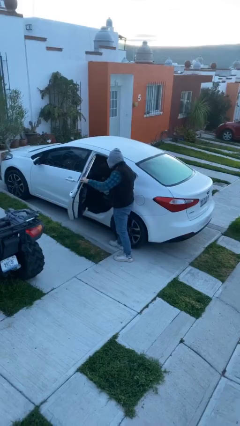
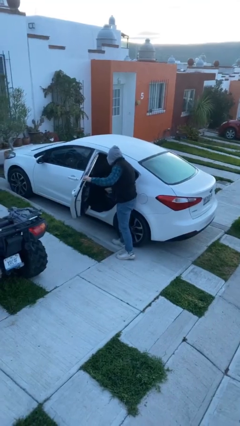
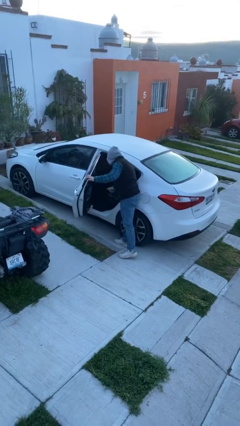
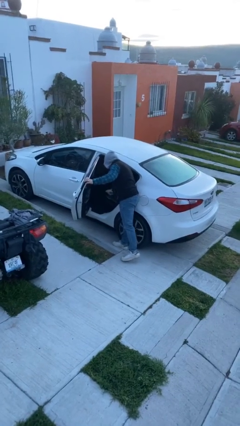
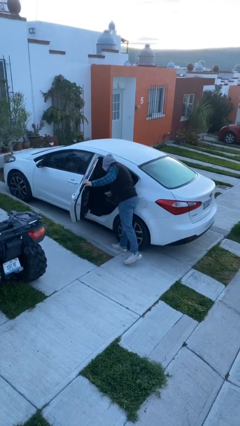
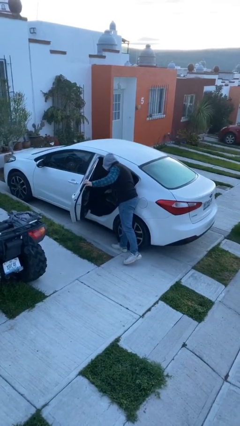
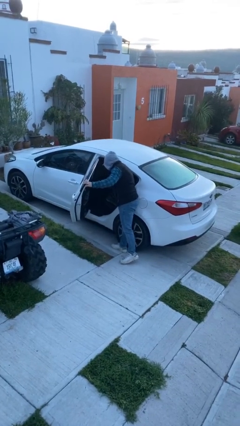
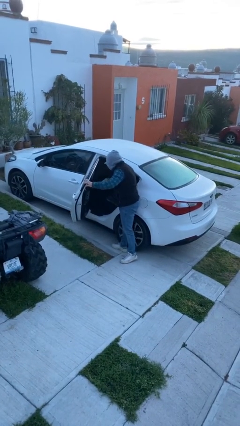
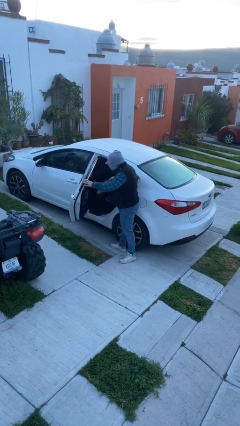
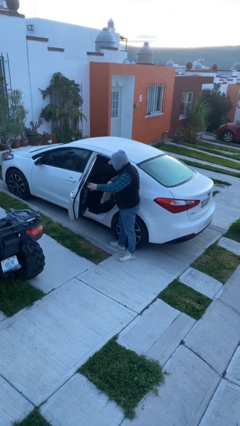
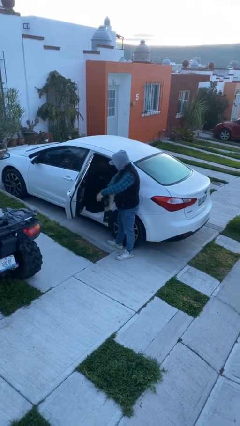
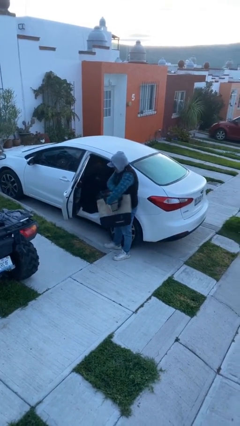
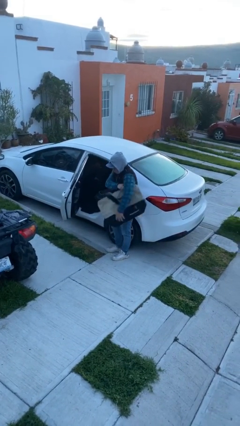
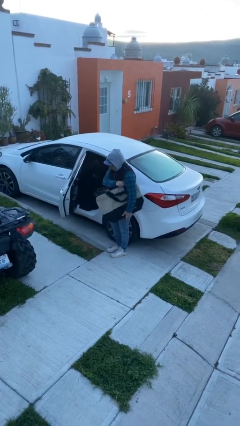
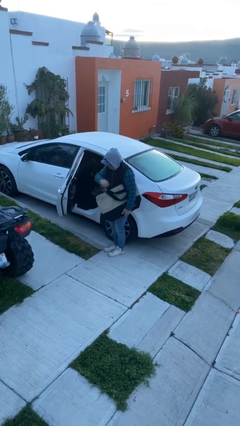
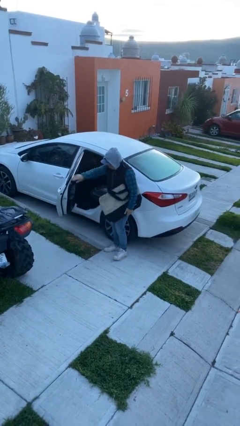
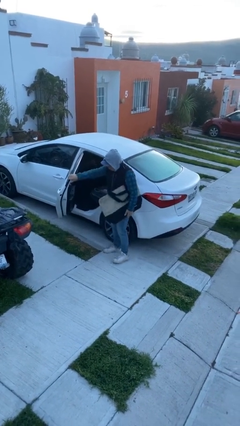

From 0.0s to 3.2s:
person unloads car

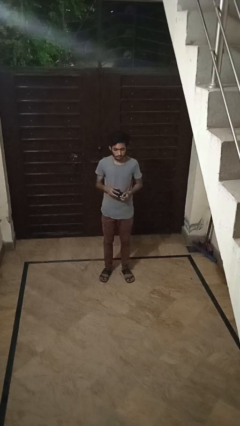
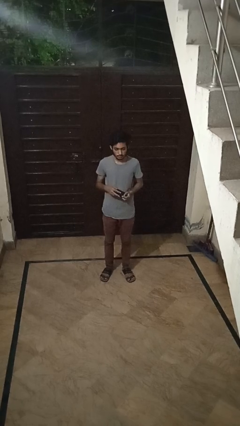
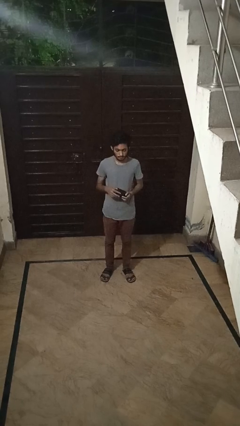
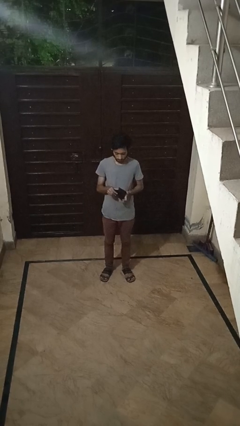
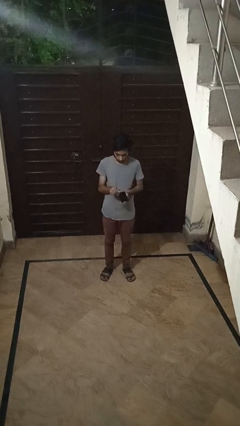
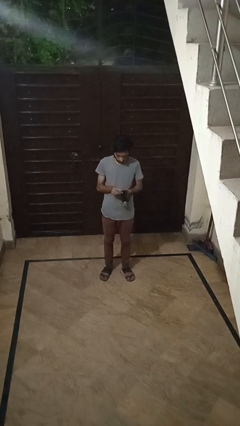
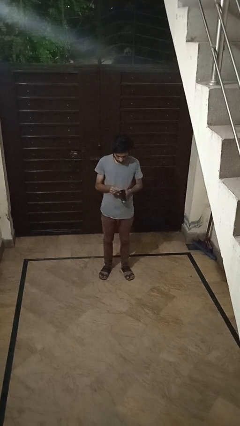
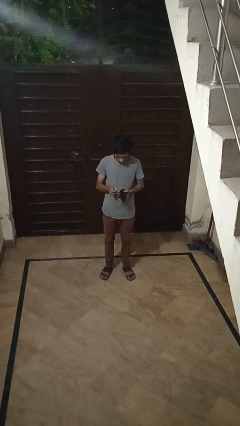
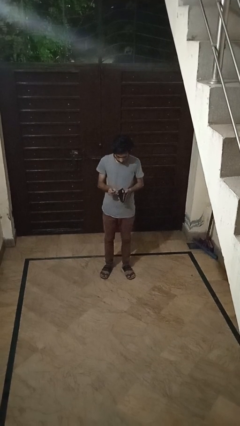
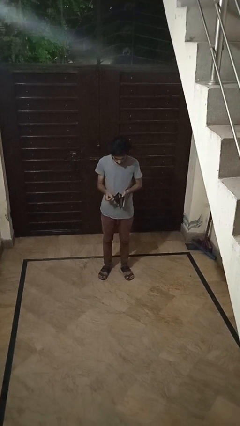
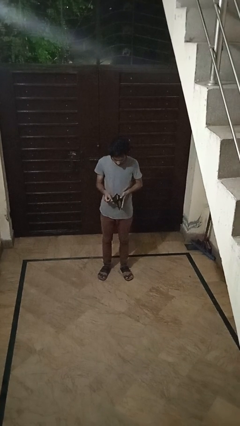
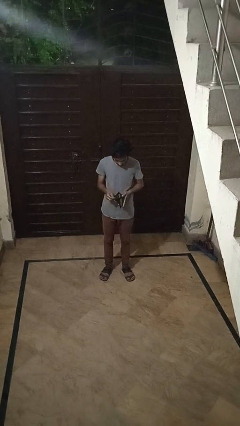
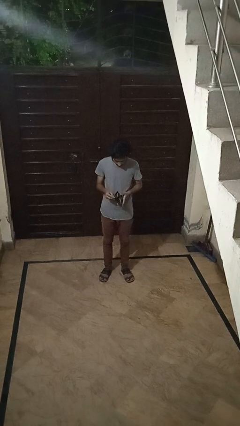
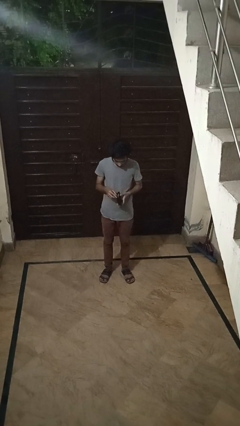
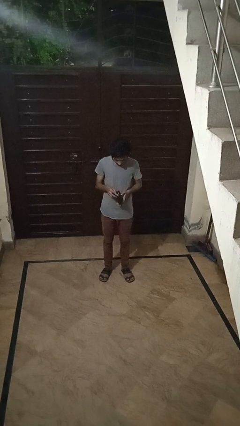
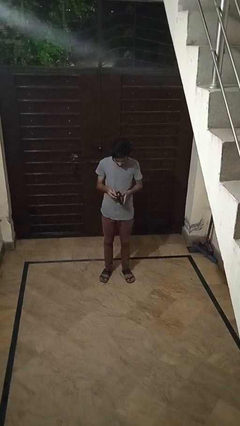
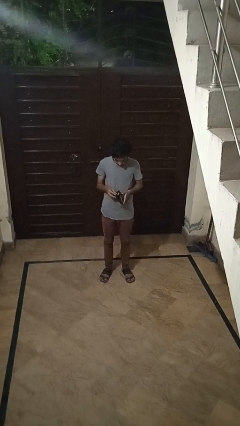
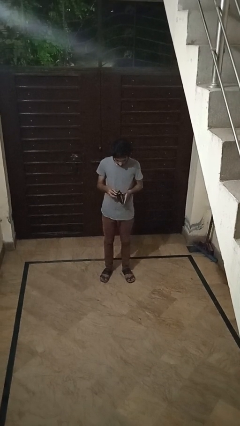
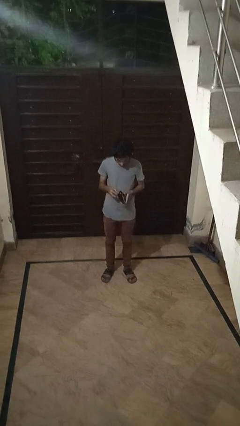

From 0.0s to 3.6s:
person searches in purse

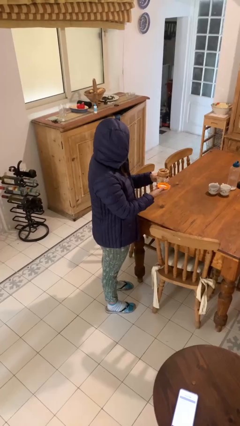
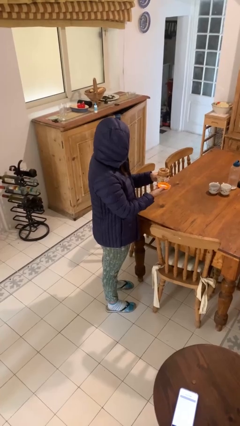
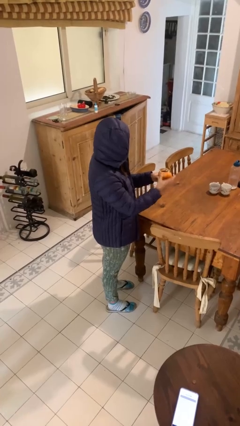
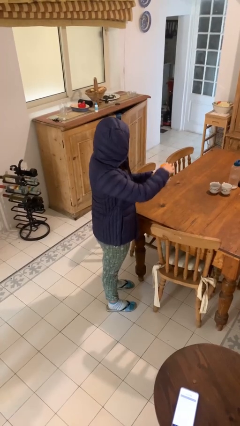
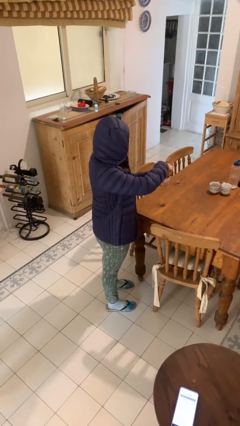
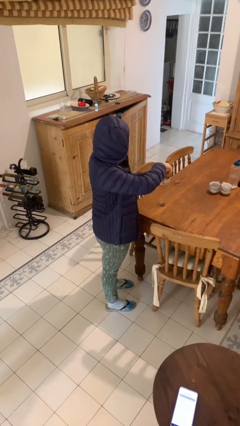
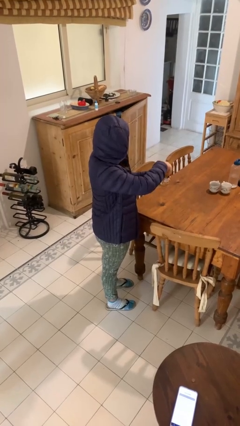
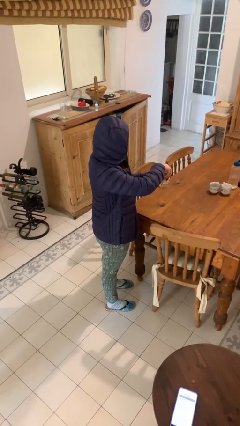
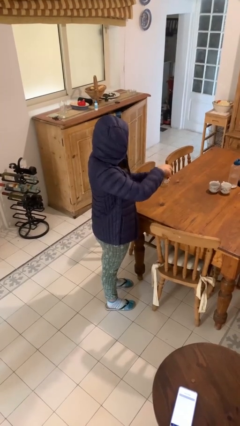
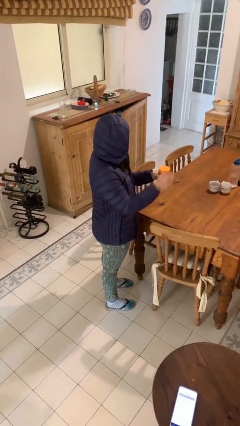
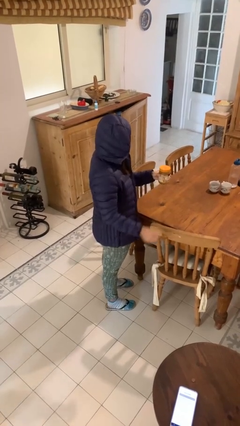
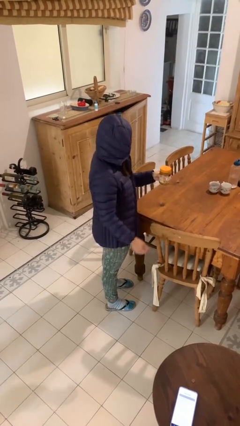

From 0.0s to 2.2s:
person closes jar

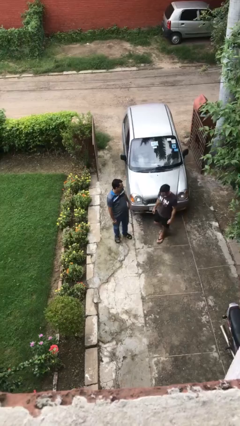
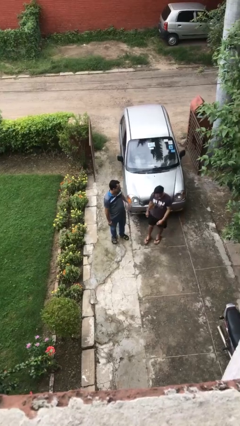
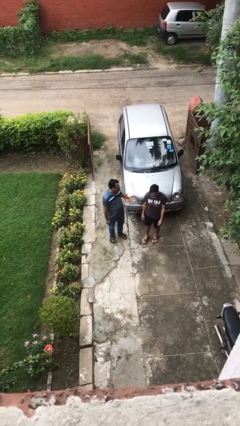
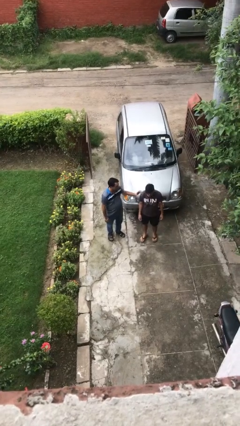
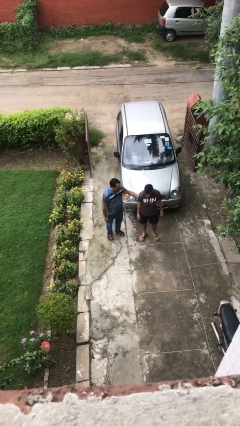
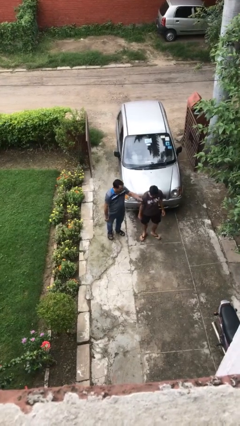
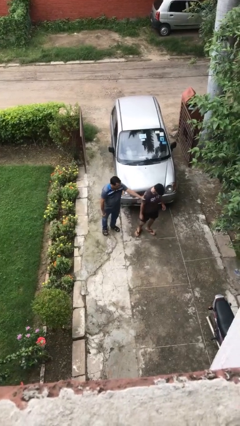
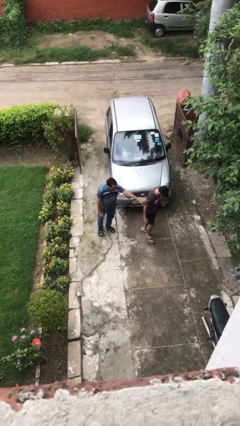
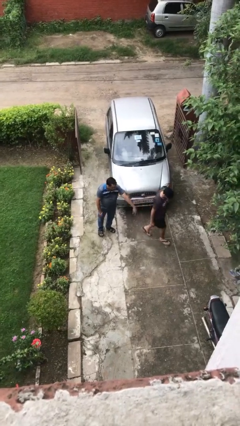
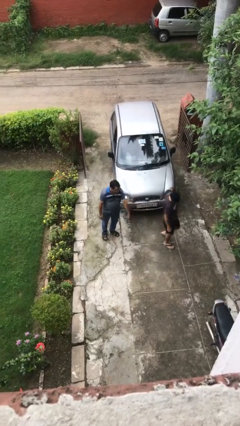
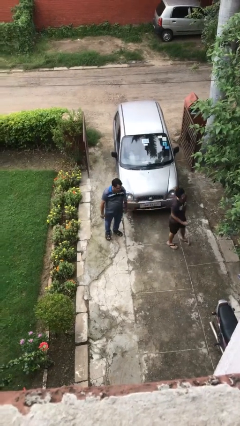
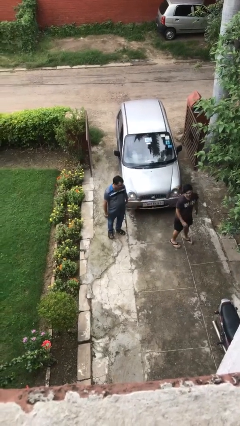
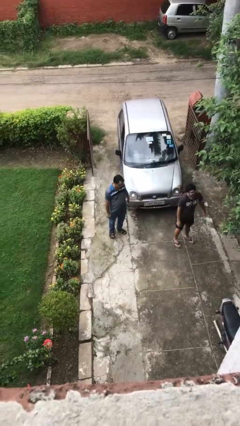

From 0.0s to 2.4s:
person shoves person

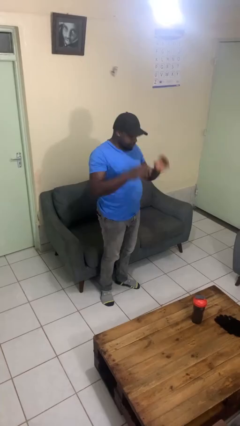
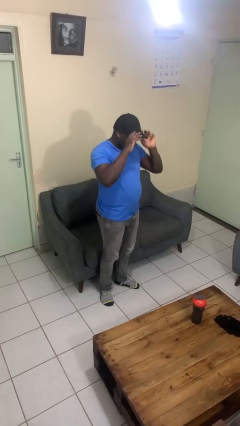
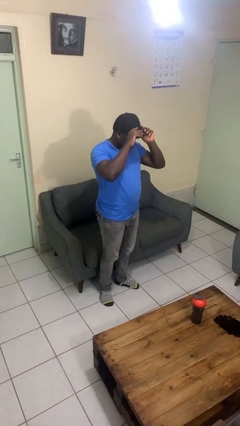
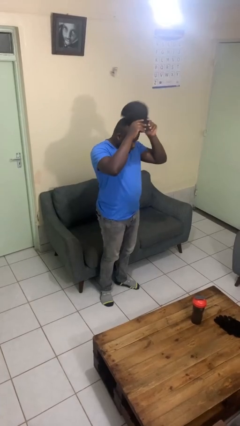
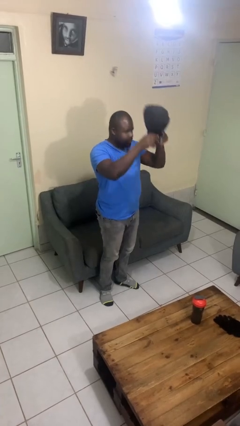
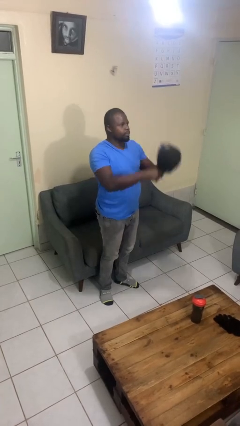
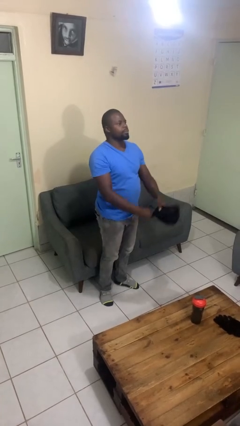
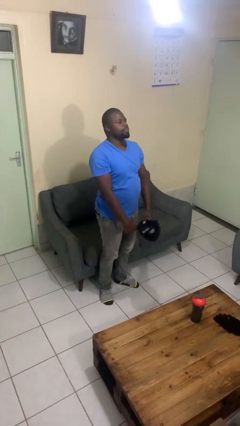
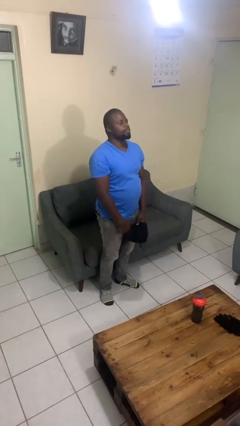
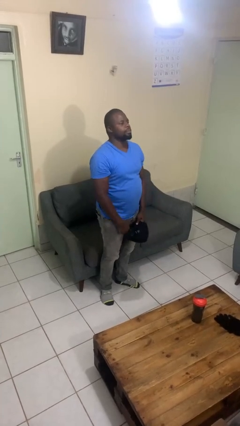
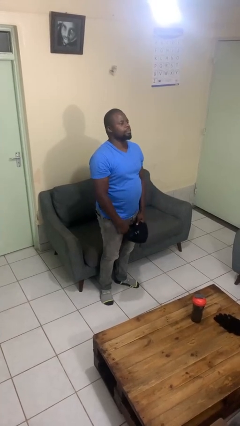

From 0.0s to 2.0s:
person takes off hat

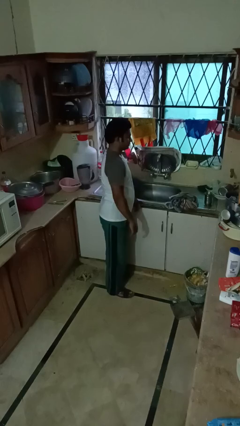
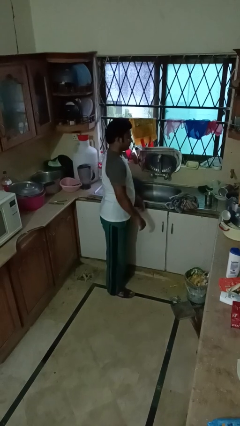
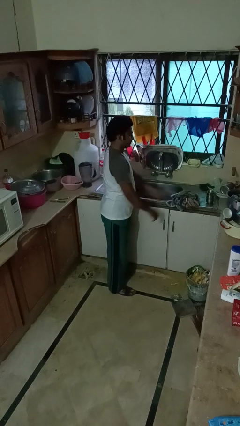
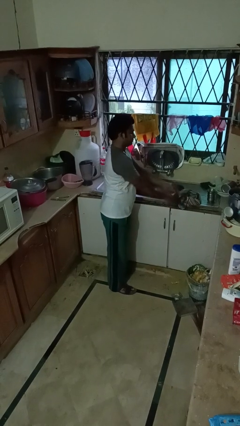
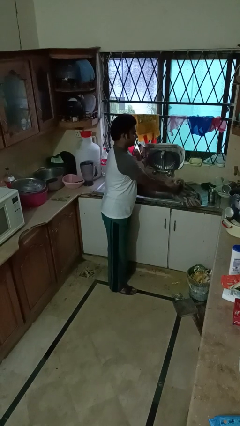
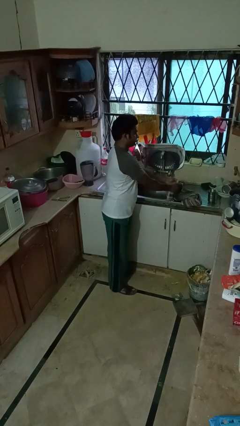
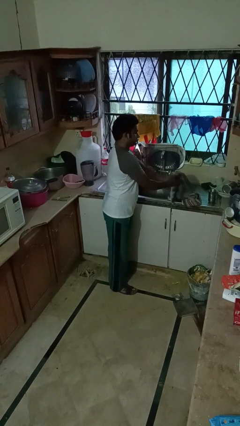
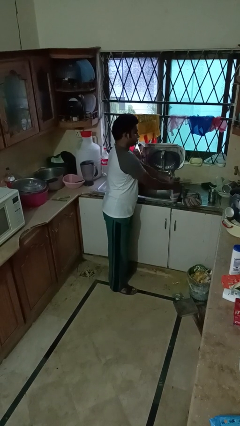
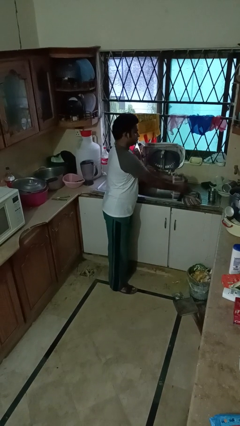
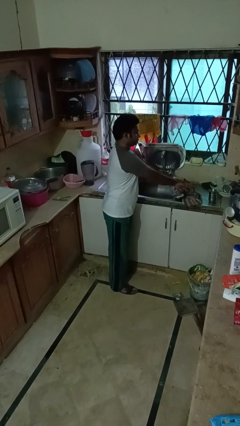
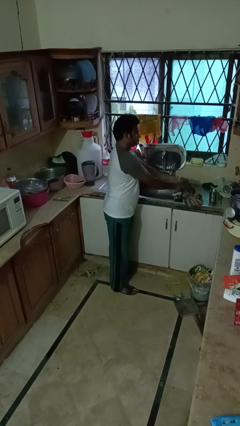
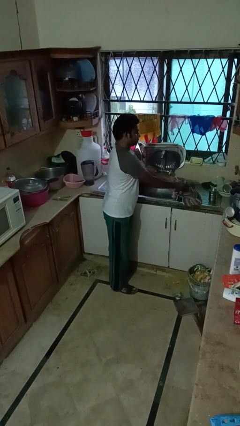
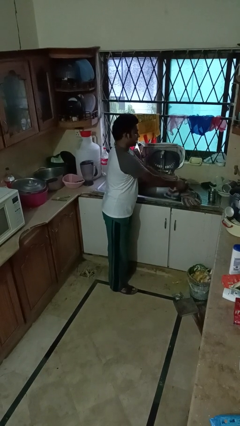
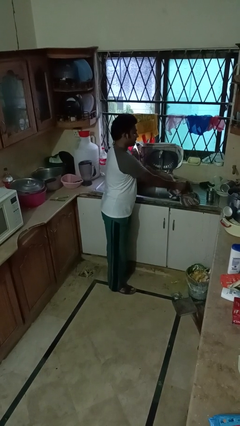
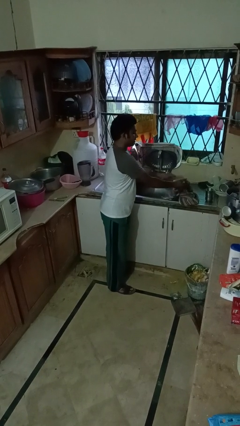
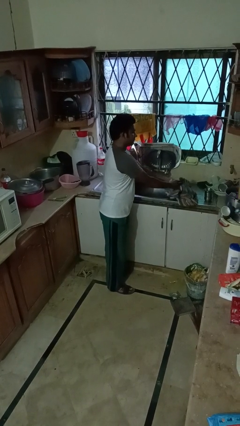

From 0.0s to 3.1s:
person dries hands with towel

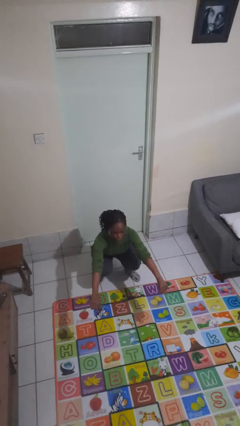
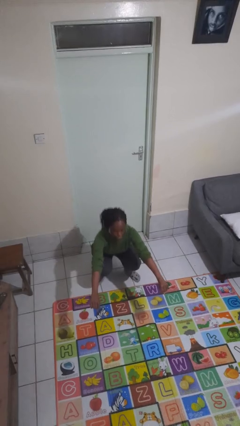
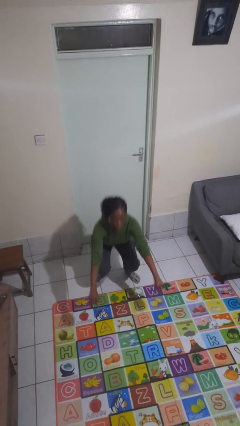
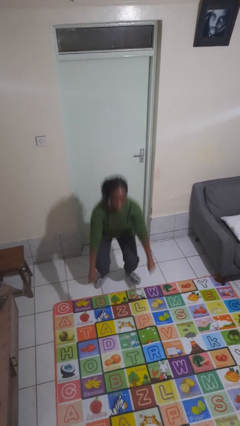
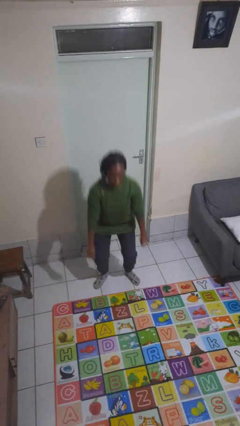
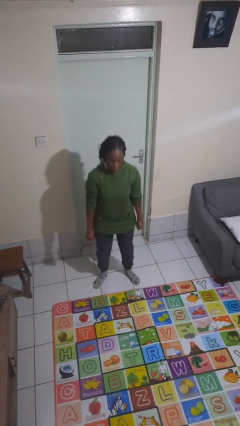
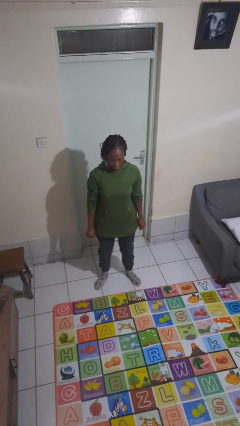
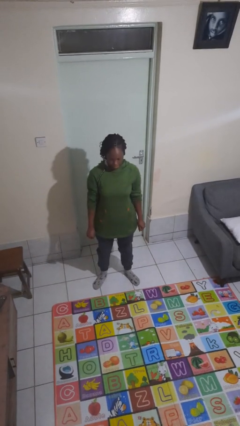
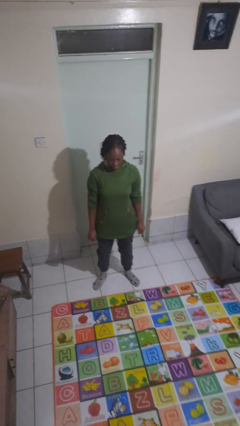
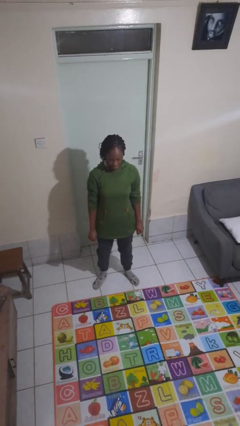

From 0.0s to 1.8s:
person stands up
